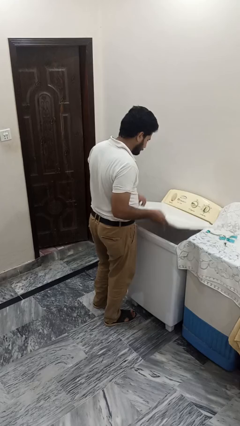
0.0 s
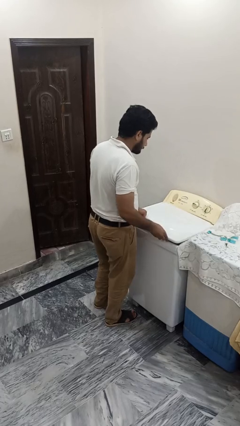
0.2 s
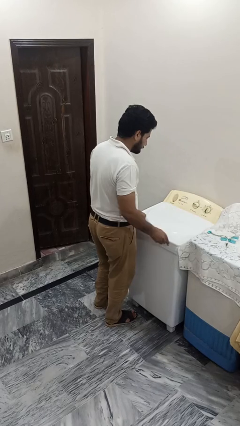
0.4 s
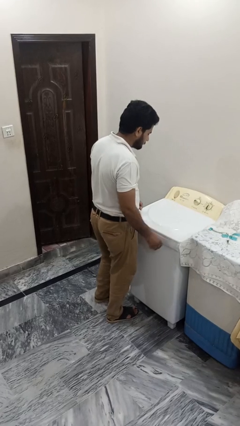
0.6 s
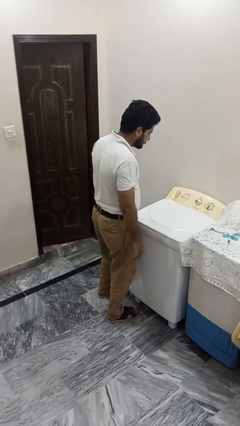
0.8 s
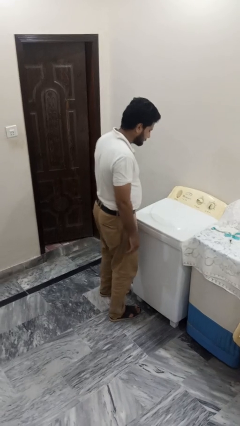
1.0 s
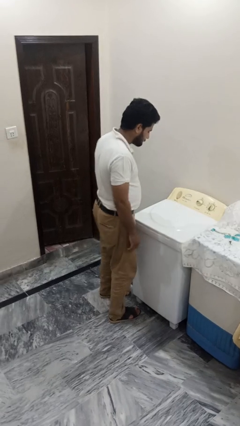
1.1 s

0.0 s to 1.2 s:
person closes clothes washer

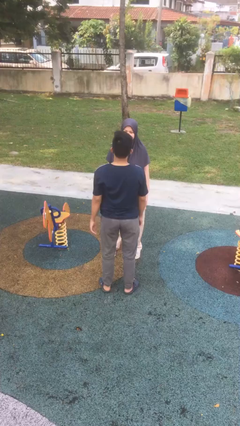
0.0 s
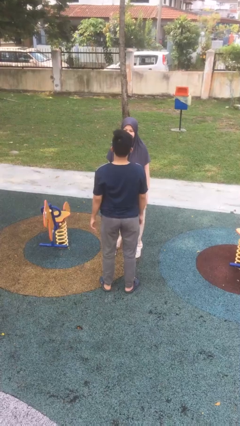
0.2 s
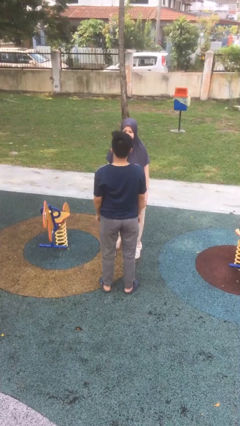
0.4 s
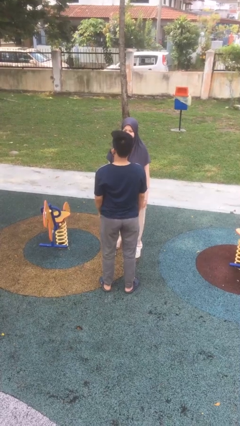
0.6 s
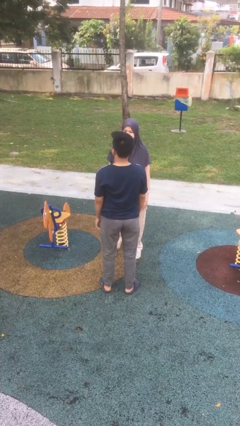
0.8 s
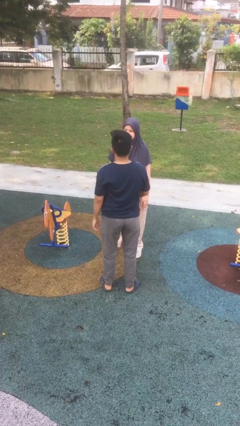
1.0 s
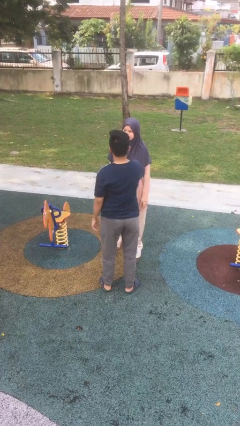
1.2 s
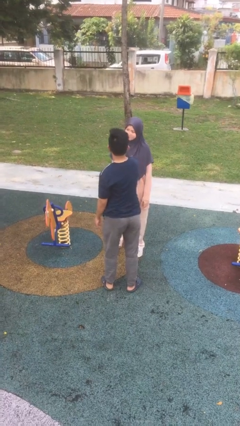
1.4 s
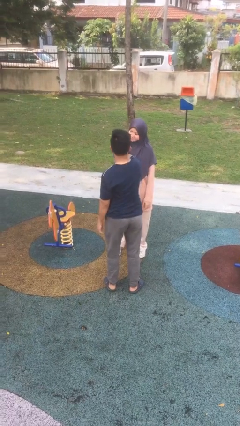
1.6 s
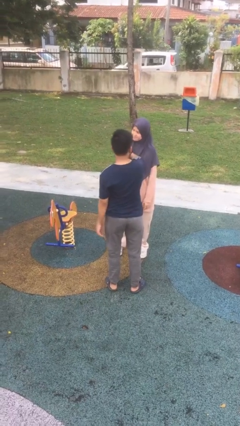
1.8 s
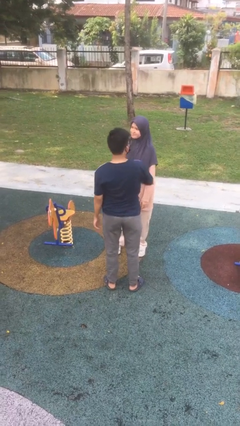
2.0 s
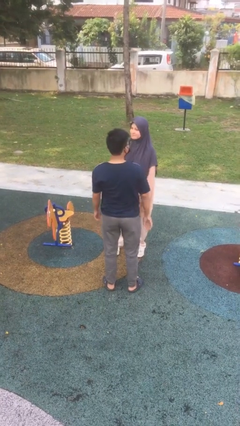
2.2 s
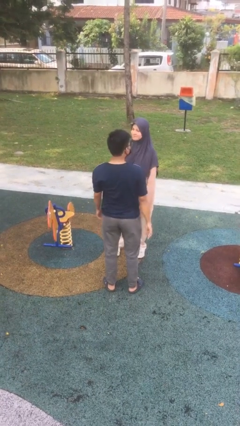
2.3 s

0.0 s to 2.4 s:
person shoves person

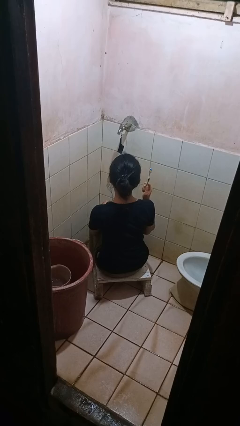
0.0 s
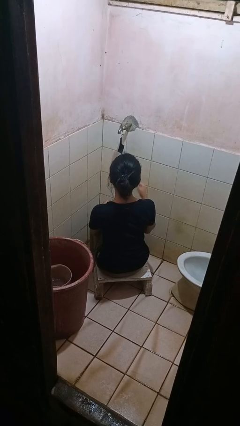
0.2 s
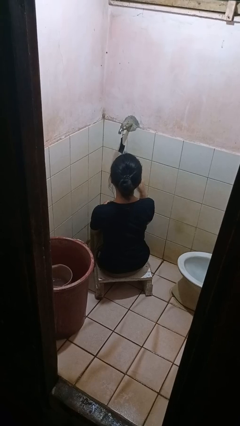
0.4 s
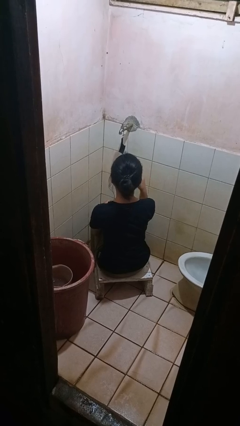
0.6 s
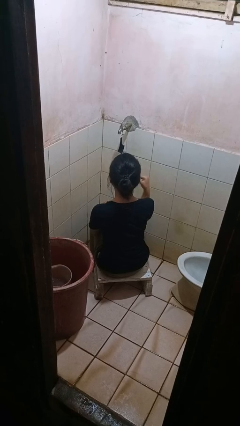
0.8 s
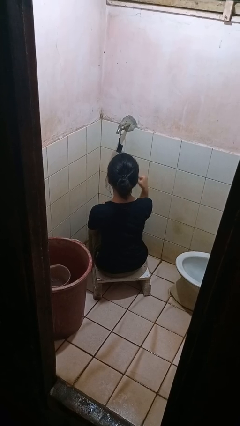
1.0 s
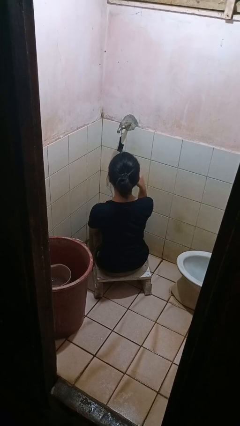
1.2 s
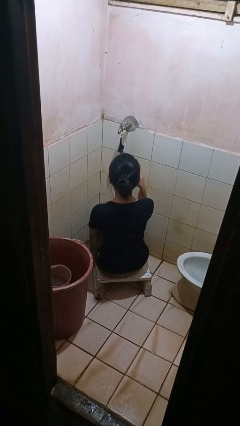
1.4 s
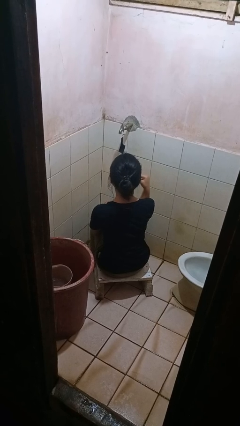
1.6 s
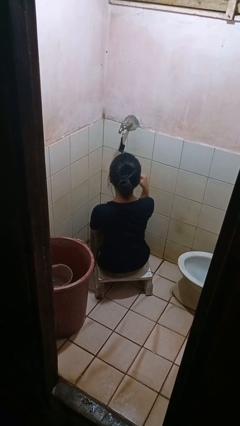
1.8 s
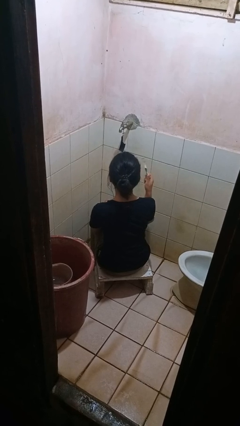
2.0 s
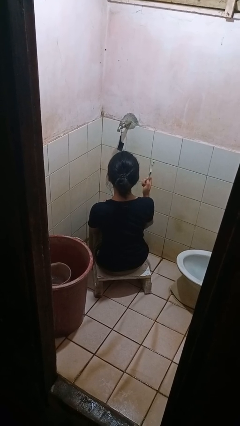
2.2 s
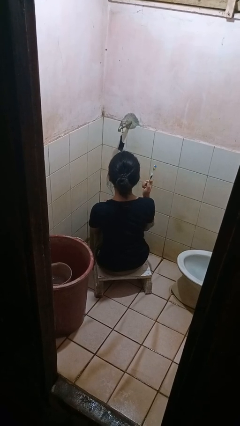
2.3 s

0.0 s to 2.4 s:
person brushes teeth

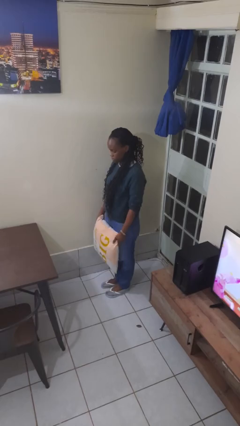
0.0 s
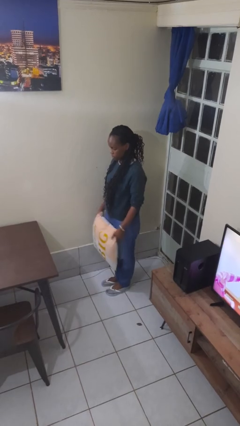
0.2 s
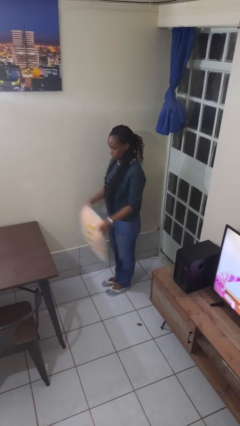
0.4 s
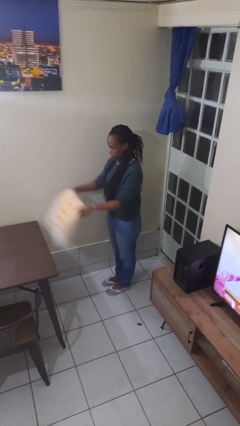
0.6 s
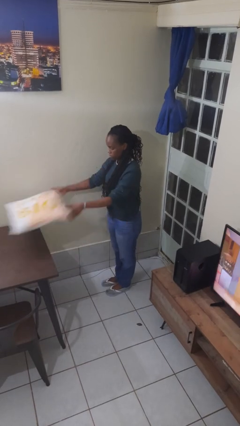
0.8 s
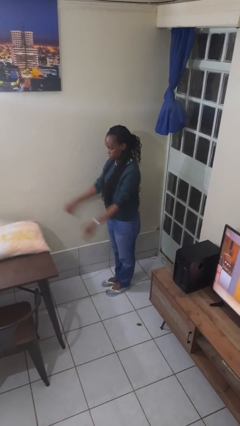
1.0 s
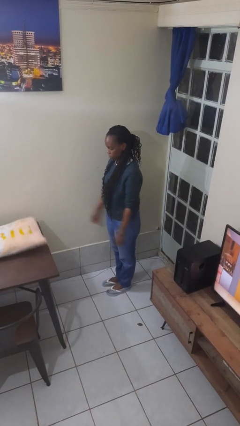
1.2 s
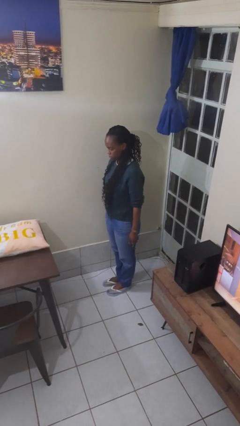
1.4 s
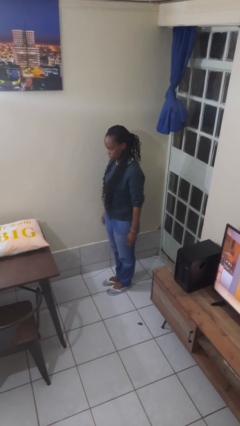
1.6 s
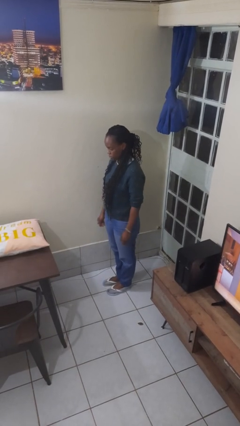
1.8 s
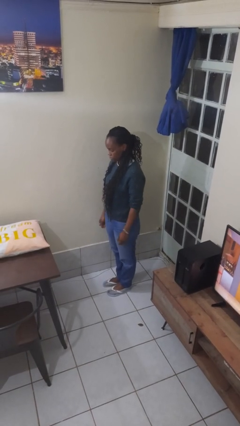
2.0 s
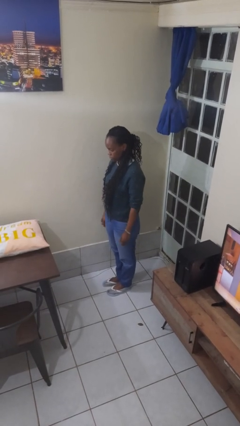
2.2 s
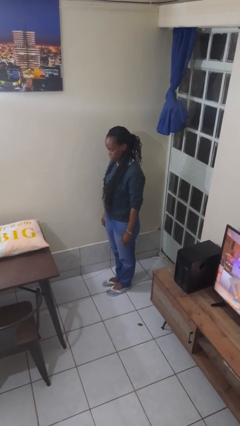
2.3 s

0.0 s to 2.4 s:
person throws object on table

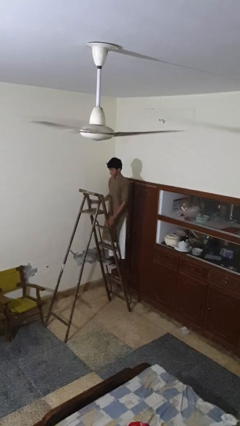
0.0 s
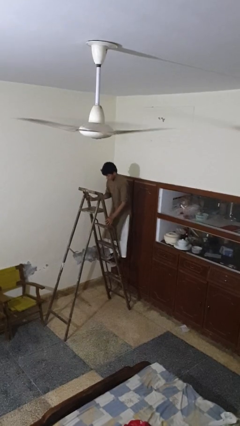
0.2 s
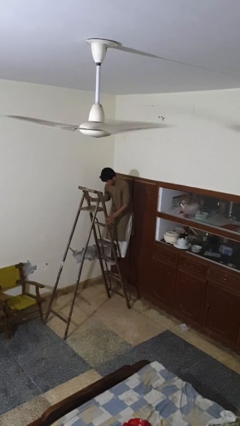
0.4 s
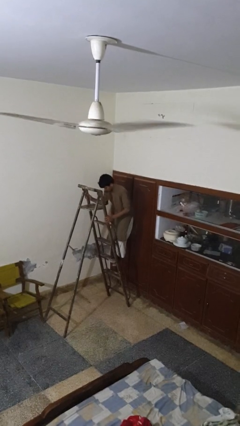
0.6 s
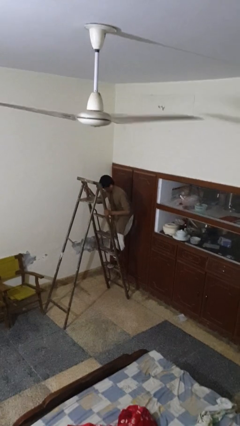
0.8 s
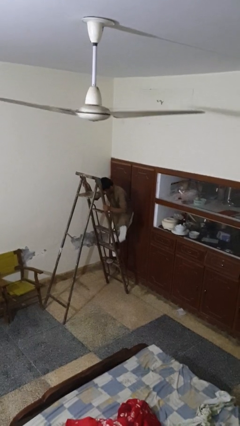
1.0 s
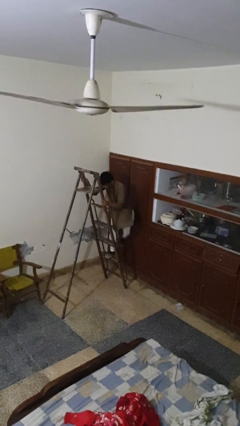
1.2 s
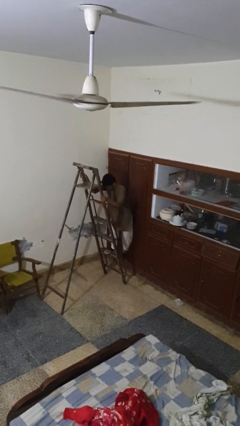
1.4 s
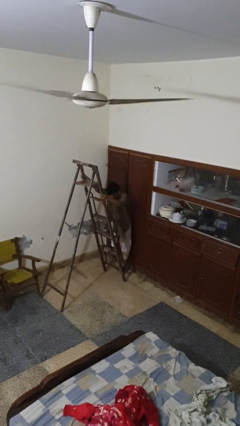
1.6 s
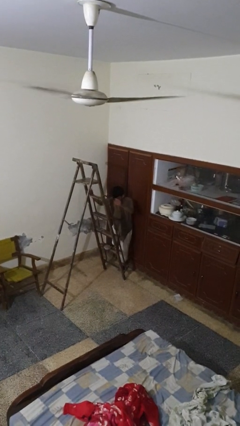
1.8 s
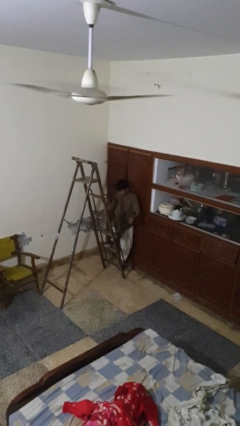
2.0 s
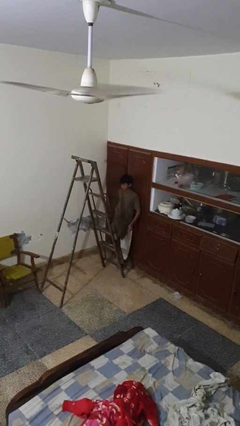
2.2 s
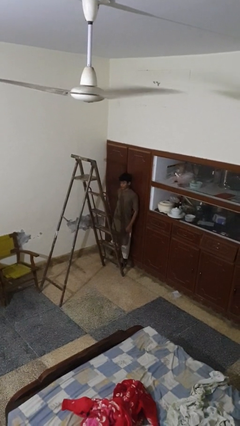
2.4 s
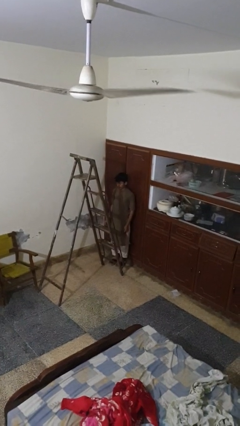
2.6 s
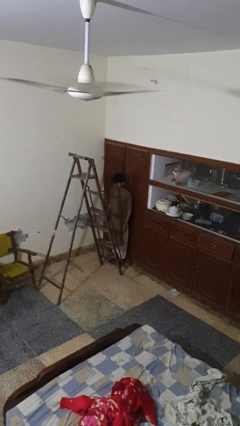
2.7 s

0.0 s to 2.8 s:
person climbs down ladder

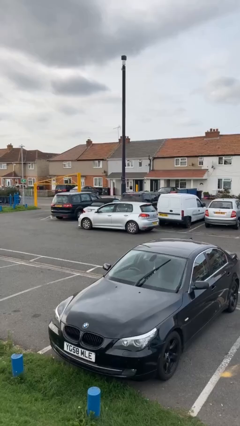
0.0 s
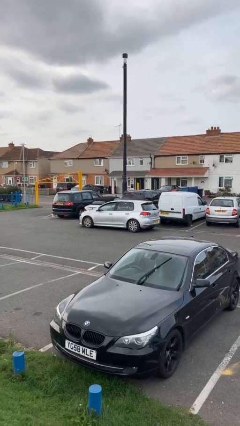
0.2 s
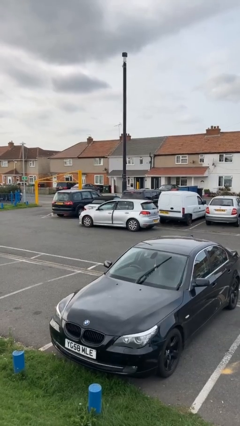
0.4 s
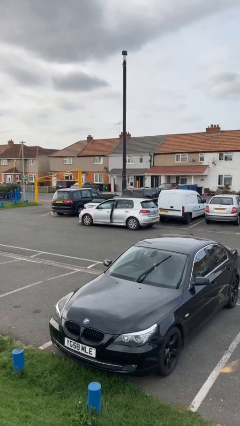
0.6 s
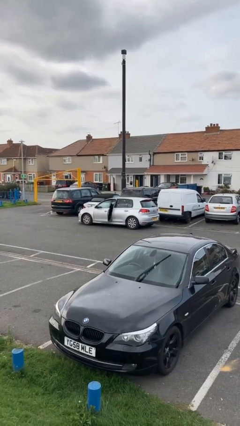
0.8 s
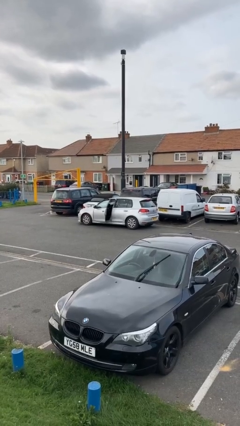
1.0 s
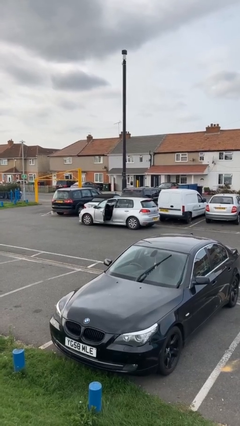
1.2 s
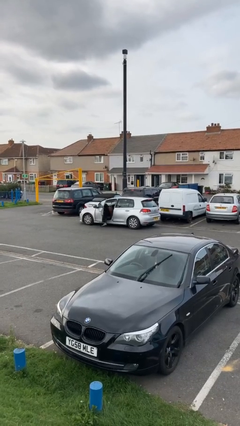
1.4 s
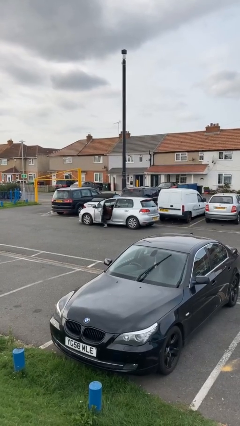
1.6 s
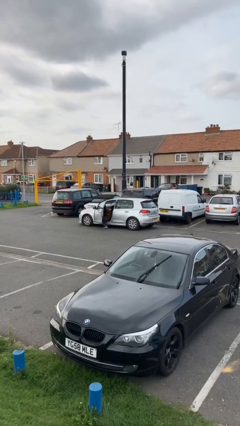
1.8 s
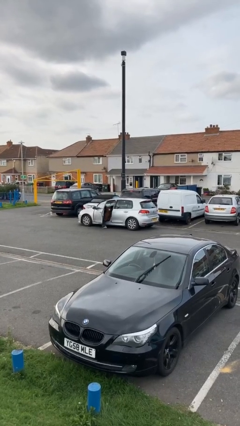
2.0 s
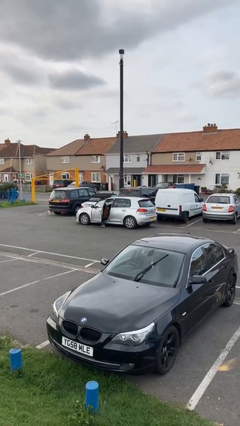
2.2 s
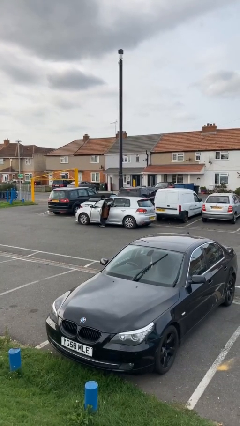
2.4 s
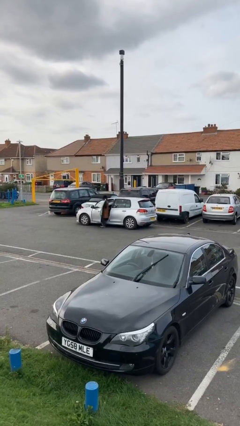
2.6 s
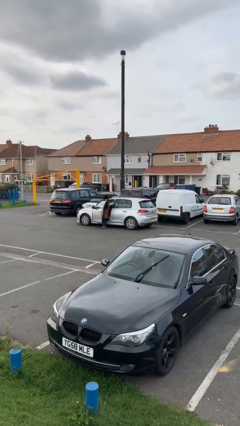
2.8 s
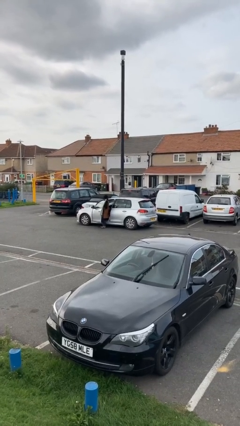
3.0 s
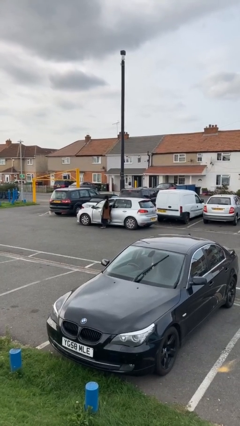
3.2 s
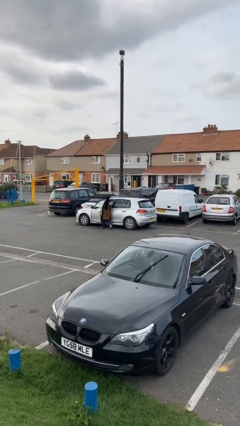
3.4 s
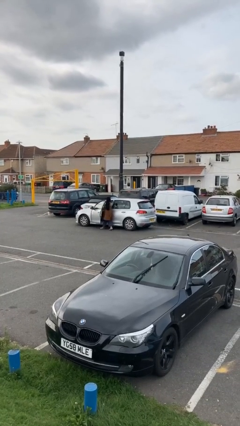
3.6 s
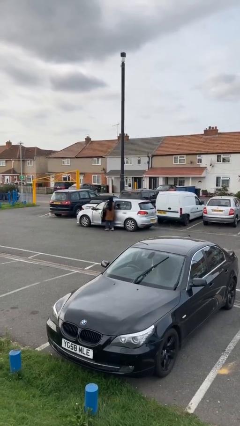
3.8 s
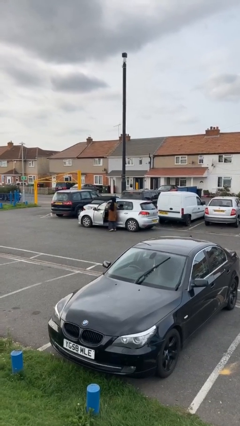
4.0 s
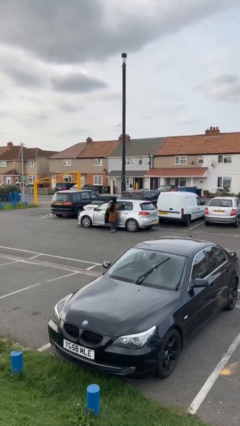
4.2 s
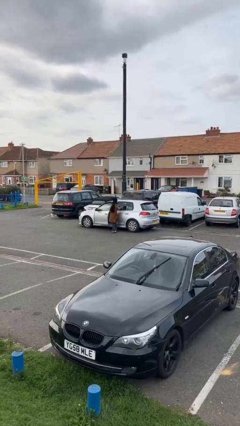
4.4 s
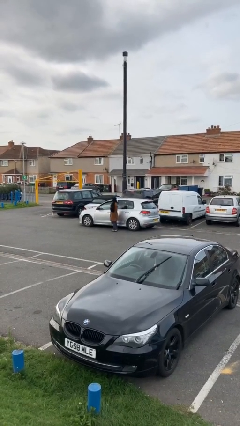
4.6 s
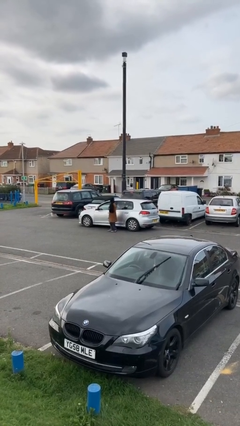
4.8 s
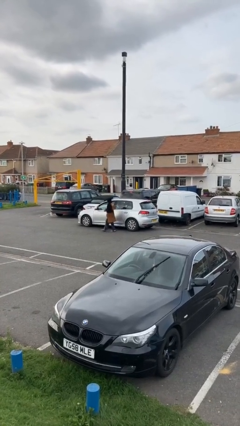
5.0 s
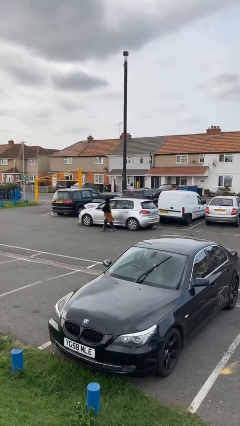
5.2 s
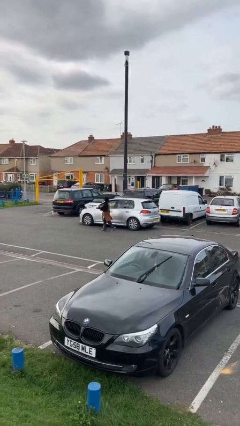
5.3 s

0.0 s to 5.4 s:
car drops off person

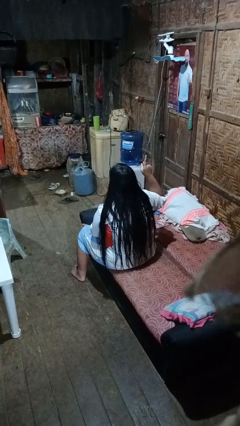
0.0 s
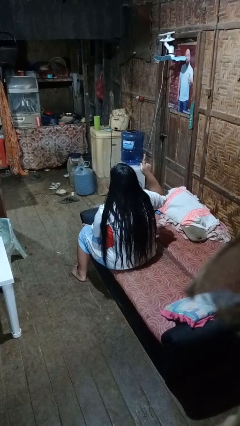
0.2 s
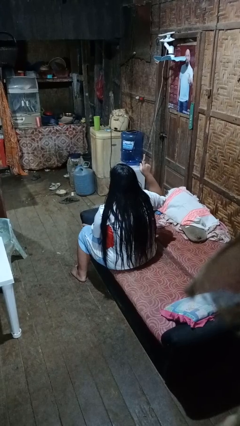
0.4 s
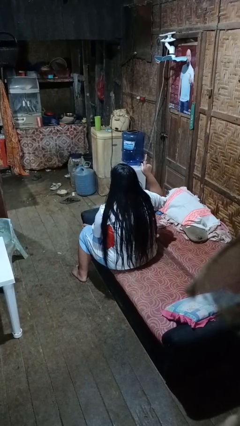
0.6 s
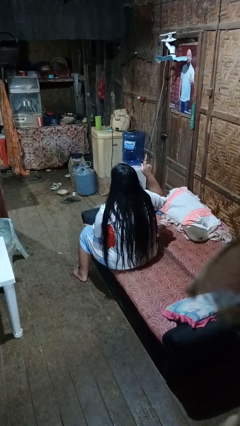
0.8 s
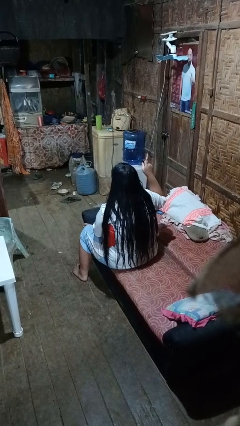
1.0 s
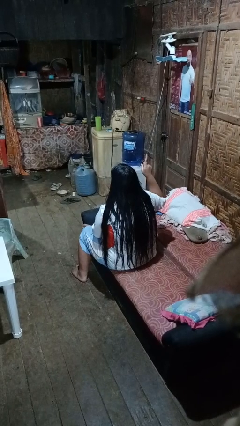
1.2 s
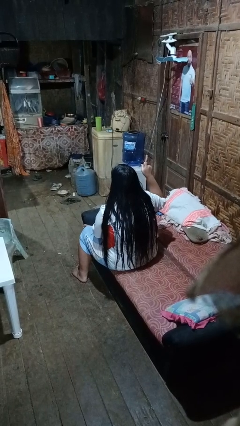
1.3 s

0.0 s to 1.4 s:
person gestures number one
